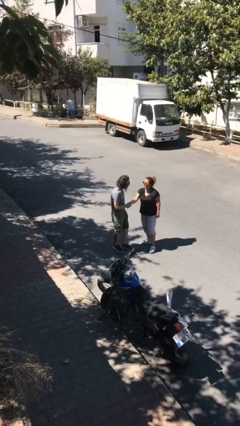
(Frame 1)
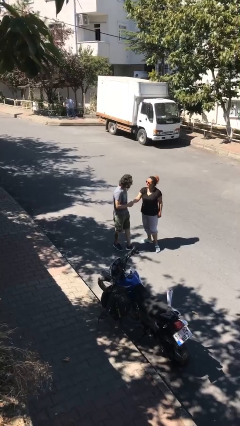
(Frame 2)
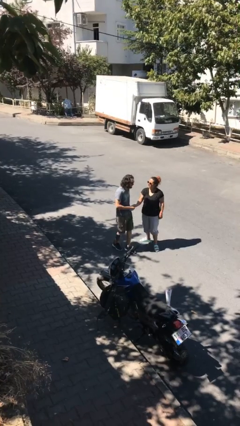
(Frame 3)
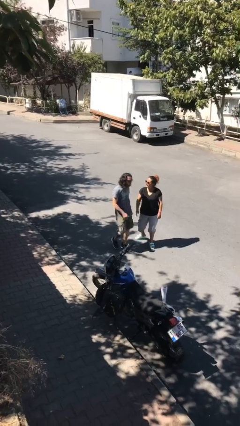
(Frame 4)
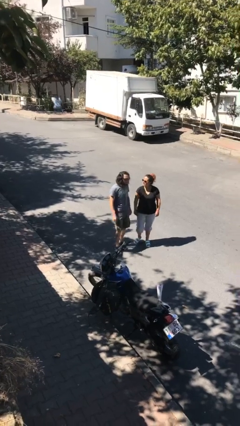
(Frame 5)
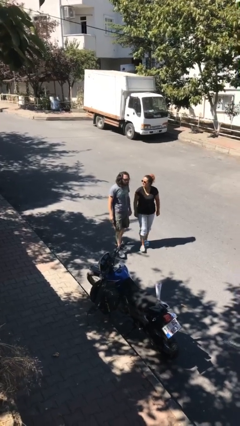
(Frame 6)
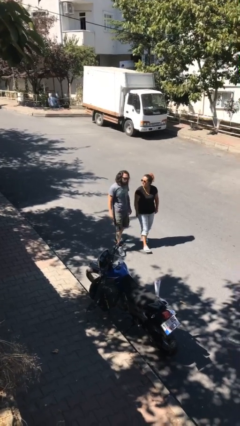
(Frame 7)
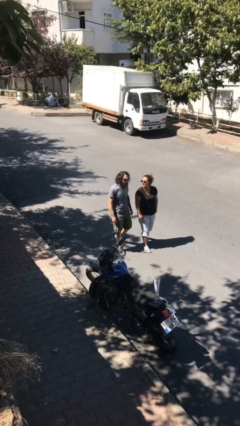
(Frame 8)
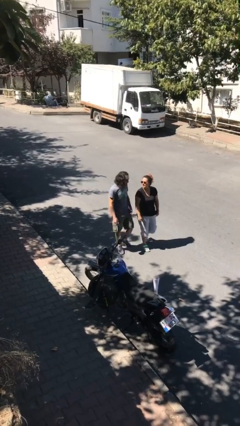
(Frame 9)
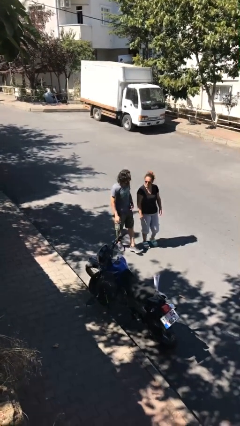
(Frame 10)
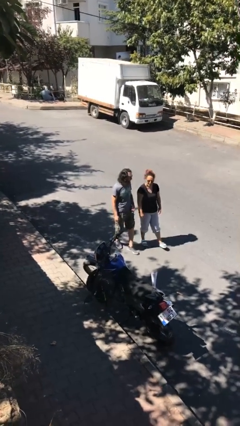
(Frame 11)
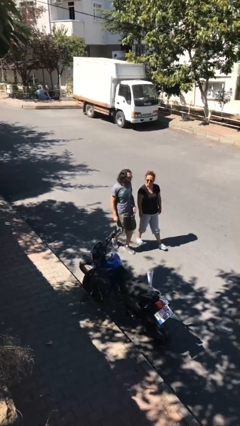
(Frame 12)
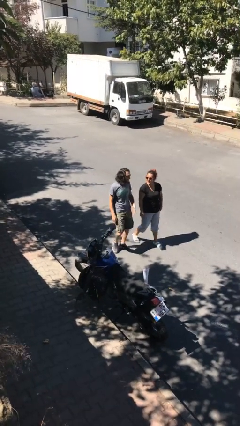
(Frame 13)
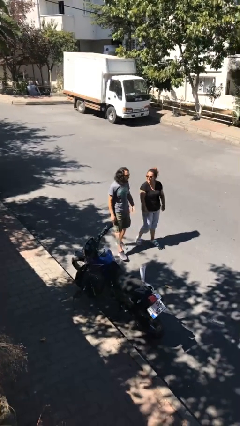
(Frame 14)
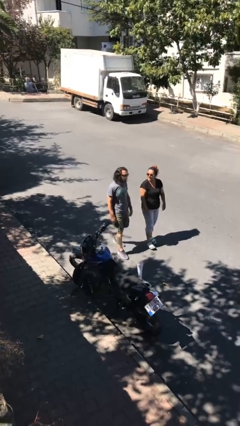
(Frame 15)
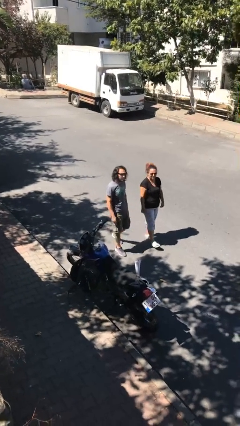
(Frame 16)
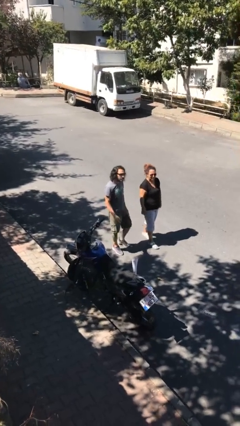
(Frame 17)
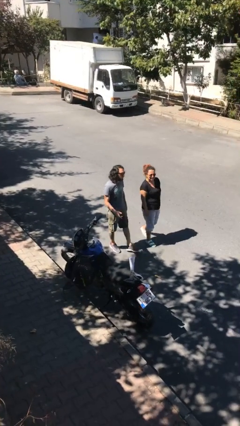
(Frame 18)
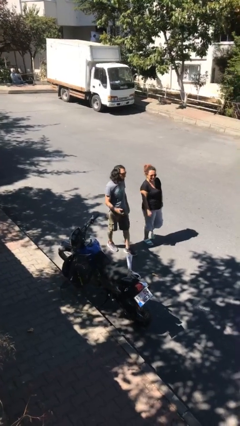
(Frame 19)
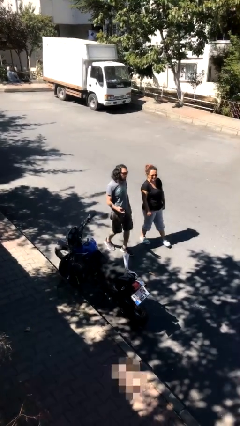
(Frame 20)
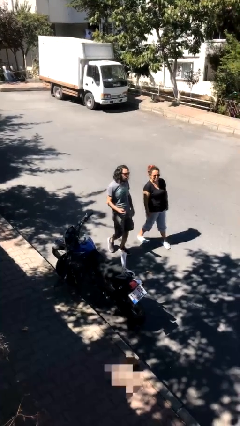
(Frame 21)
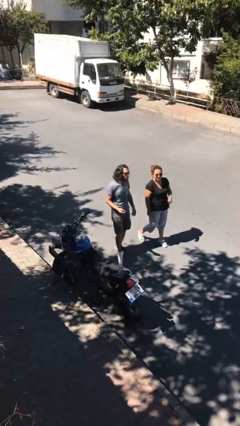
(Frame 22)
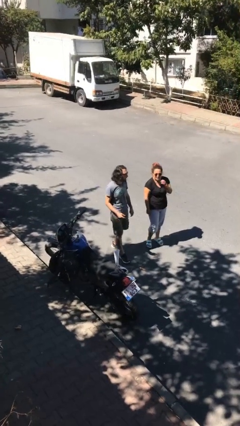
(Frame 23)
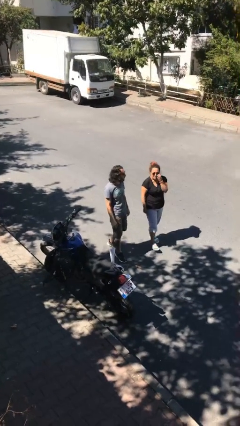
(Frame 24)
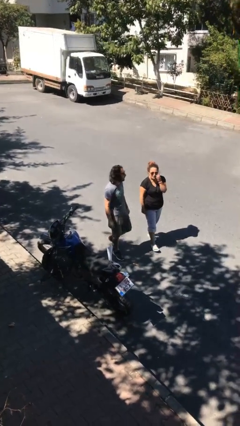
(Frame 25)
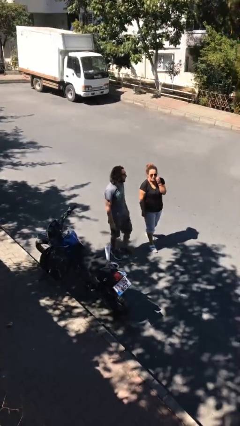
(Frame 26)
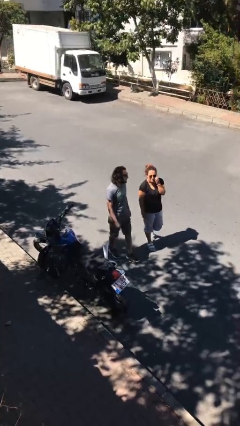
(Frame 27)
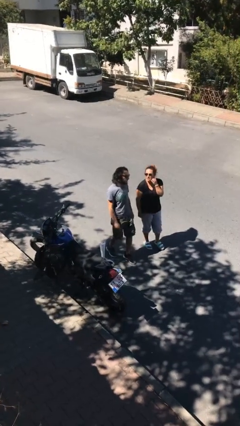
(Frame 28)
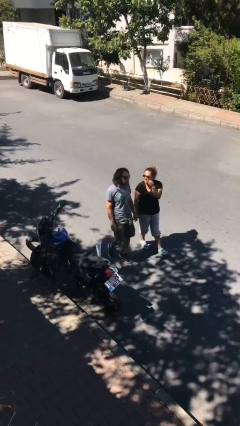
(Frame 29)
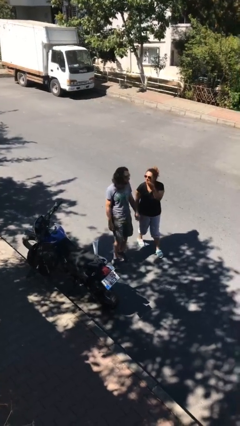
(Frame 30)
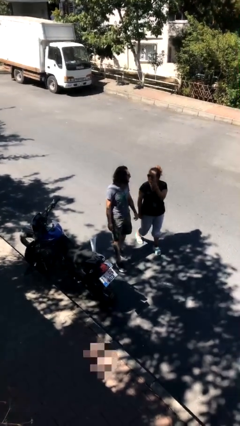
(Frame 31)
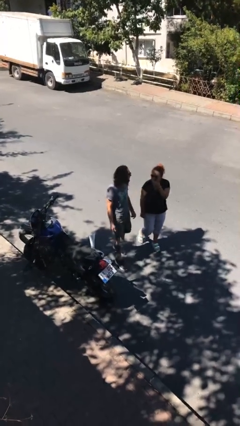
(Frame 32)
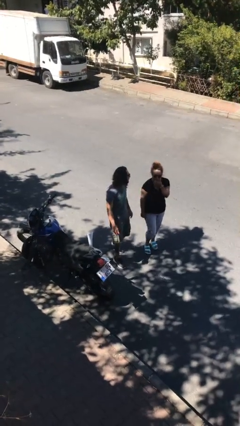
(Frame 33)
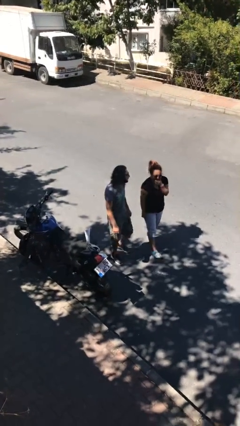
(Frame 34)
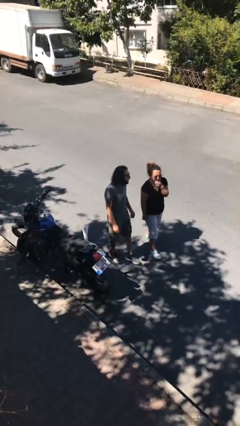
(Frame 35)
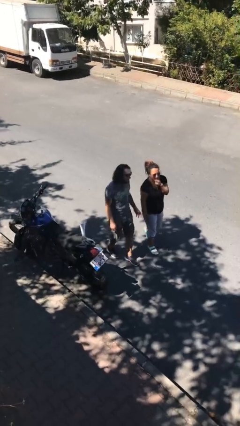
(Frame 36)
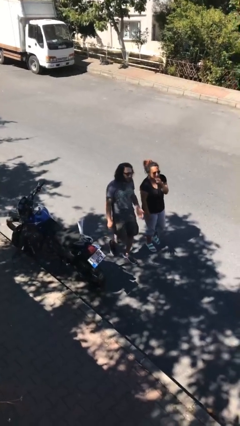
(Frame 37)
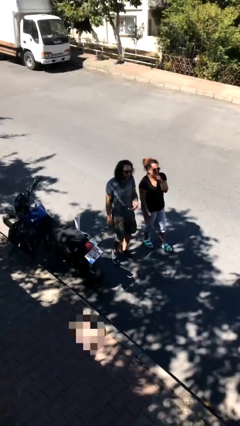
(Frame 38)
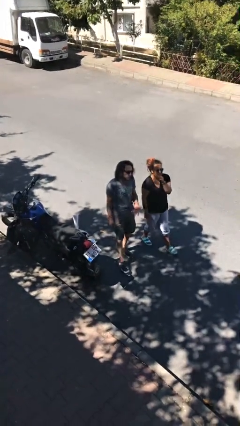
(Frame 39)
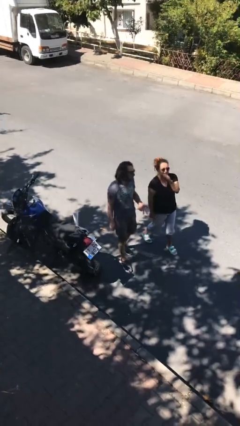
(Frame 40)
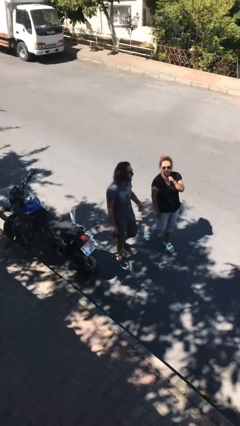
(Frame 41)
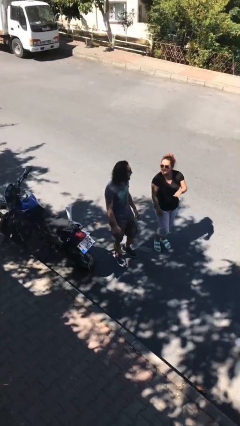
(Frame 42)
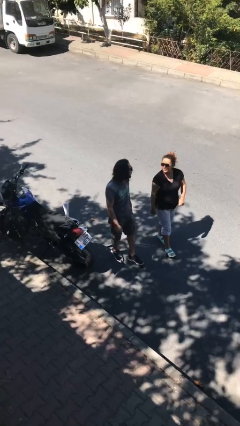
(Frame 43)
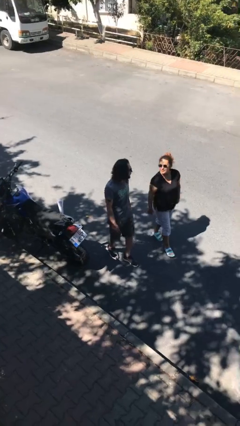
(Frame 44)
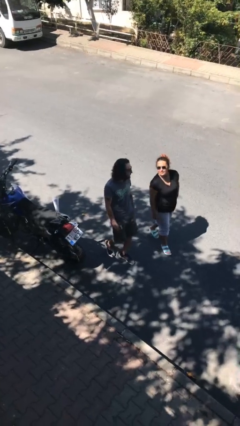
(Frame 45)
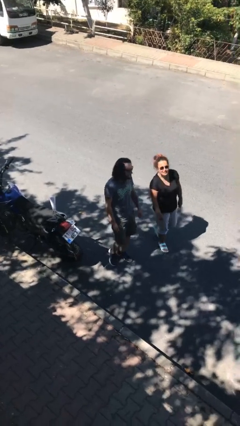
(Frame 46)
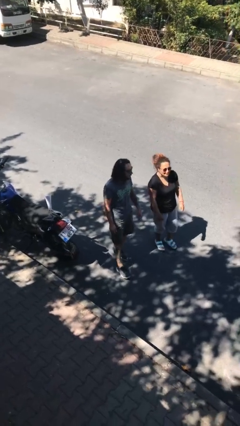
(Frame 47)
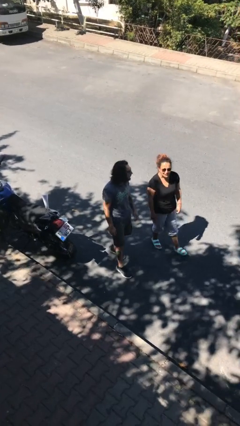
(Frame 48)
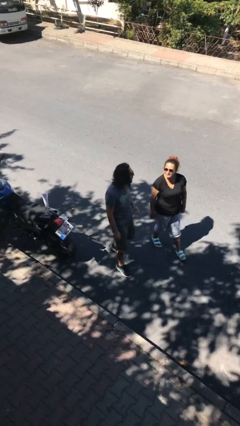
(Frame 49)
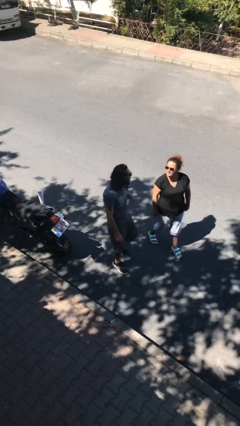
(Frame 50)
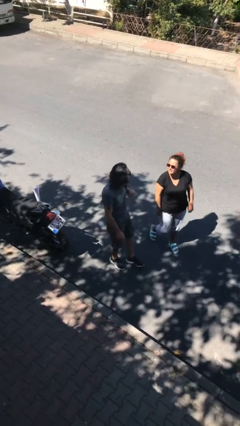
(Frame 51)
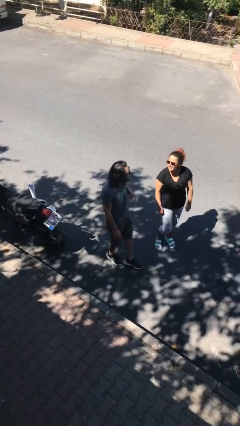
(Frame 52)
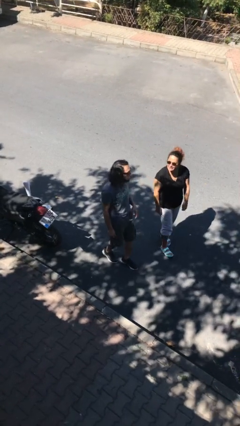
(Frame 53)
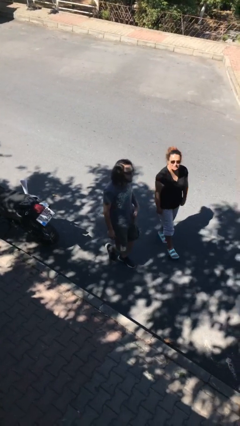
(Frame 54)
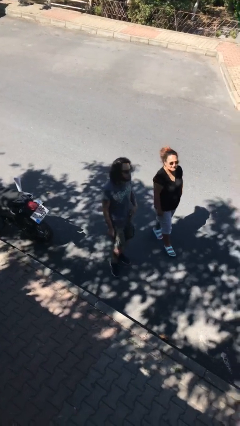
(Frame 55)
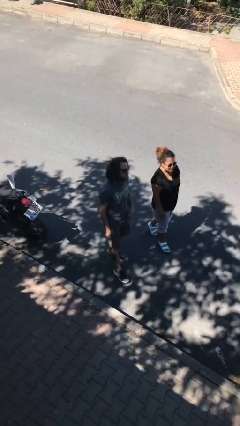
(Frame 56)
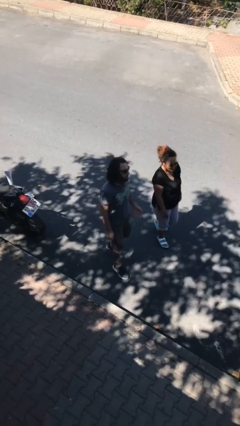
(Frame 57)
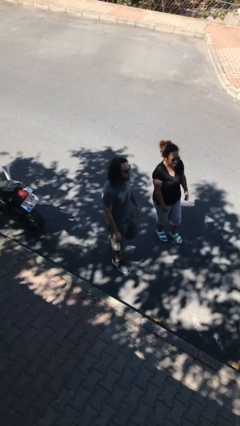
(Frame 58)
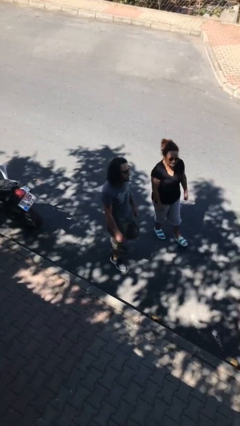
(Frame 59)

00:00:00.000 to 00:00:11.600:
person talks to person

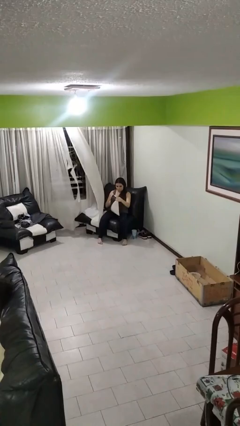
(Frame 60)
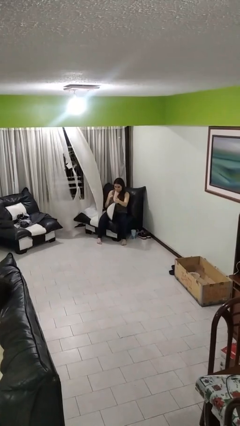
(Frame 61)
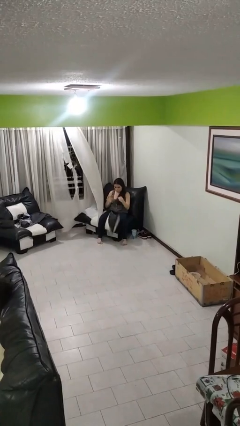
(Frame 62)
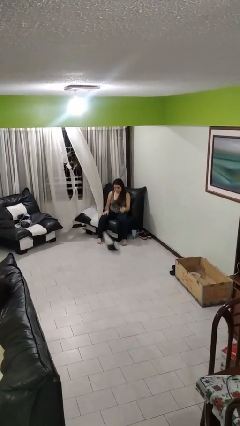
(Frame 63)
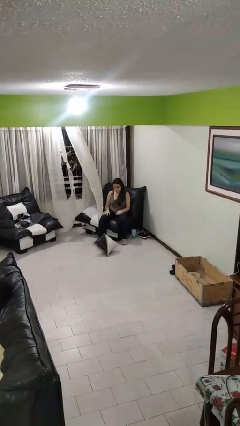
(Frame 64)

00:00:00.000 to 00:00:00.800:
person drops object

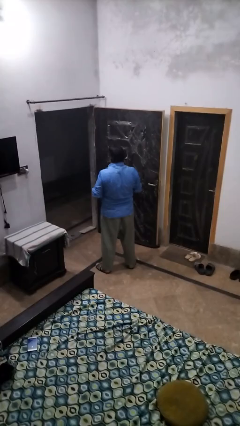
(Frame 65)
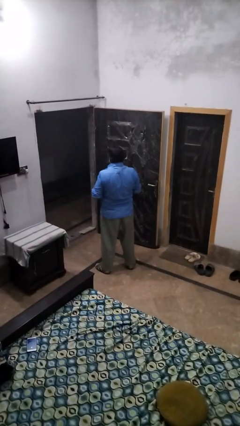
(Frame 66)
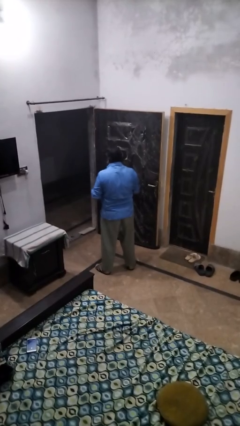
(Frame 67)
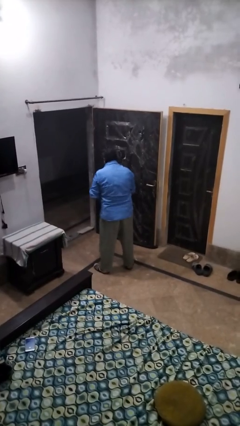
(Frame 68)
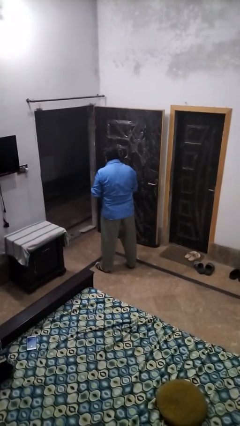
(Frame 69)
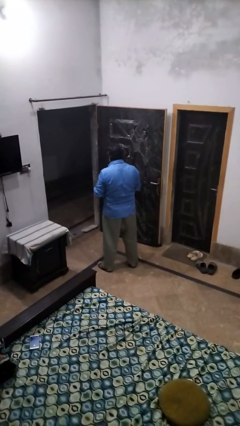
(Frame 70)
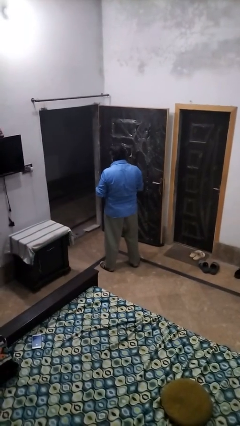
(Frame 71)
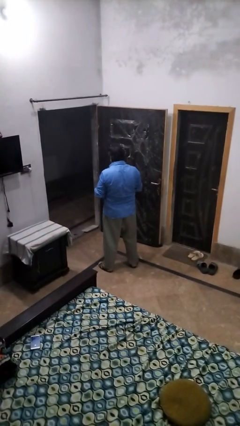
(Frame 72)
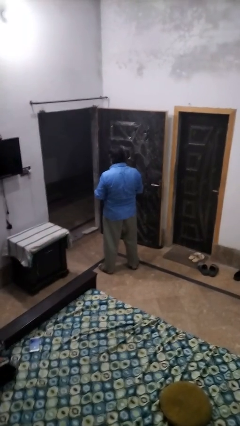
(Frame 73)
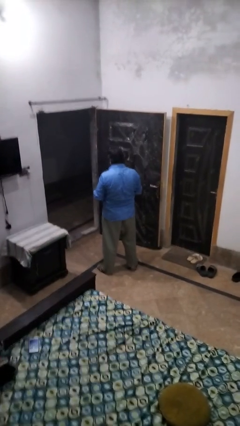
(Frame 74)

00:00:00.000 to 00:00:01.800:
person picks up object from floor

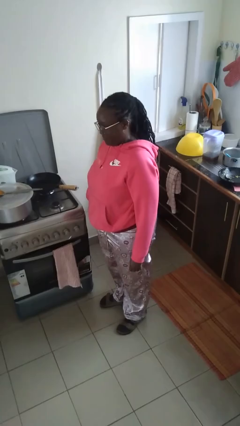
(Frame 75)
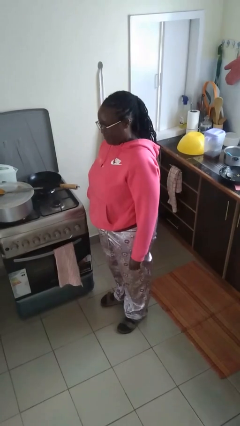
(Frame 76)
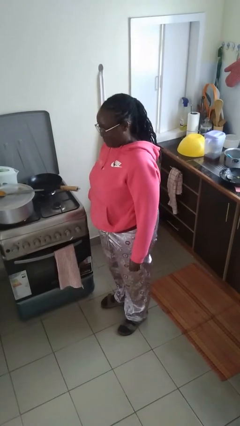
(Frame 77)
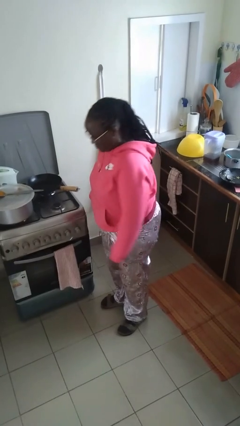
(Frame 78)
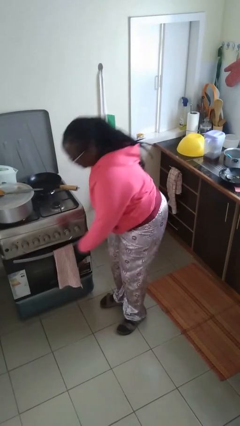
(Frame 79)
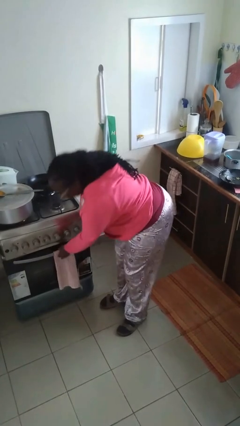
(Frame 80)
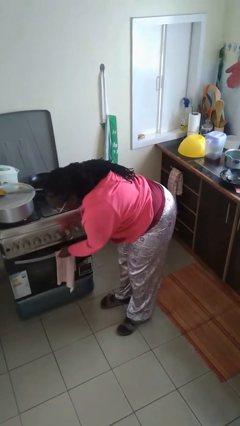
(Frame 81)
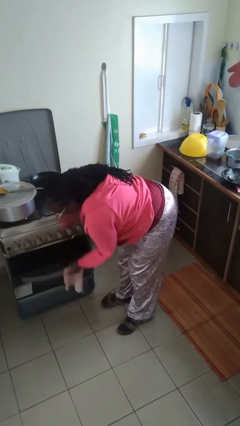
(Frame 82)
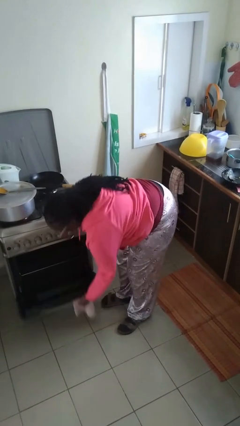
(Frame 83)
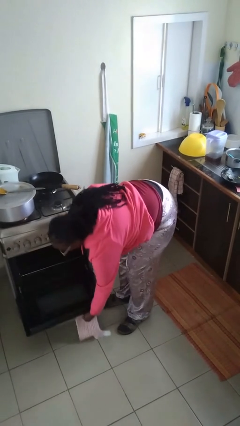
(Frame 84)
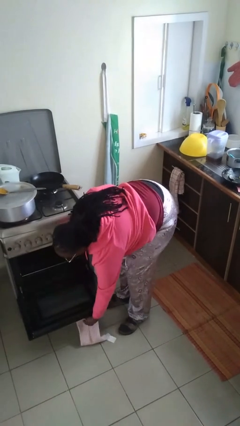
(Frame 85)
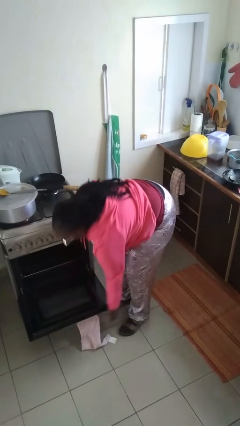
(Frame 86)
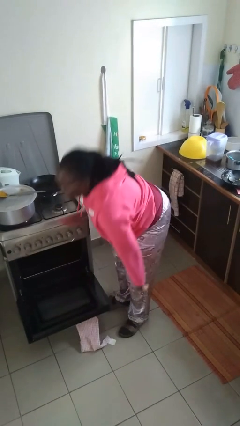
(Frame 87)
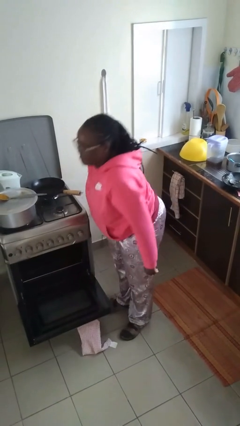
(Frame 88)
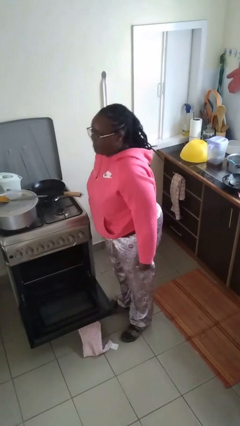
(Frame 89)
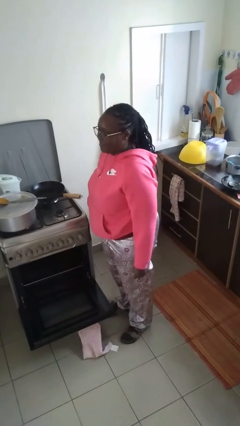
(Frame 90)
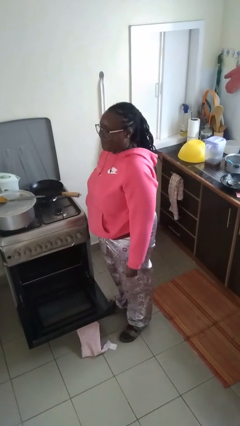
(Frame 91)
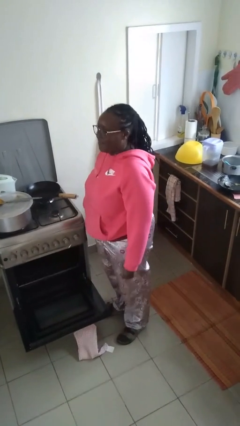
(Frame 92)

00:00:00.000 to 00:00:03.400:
person opens oven door

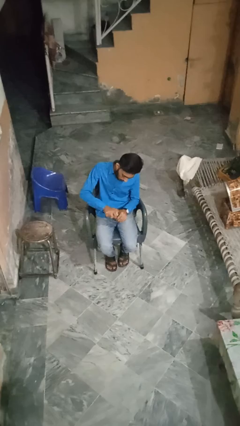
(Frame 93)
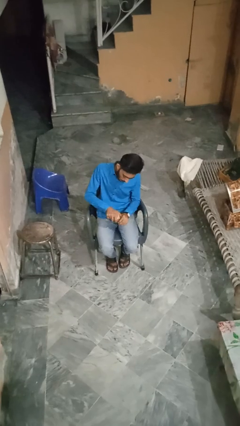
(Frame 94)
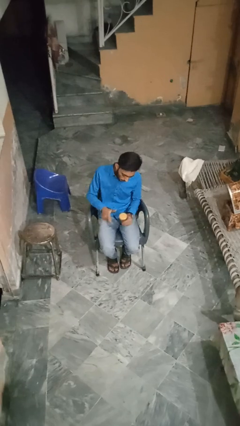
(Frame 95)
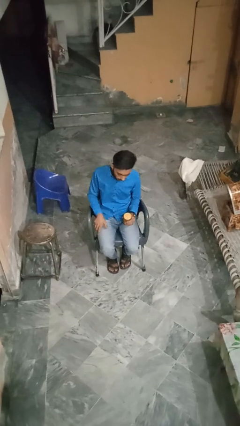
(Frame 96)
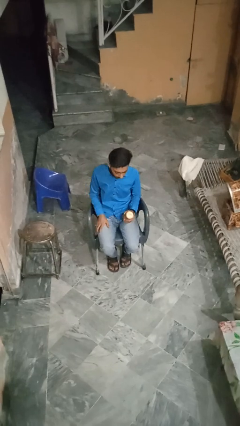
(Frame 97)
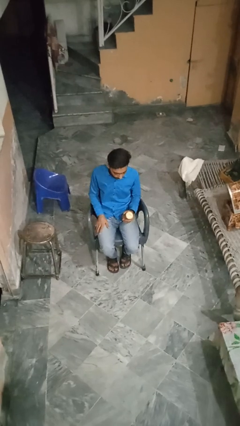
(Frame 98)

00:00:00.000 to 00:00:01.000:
person closes jar
